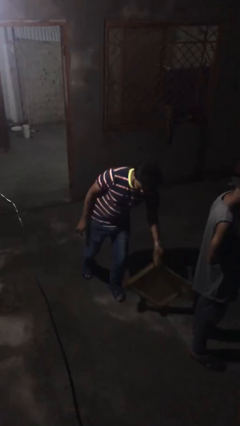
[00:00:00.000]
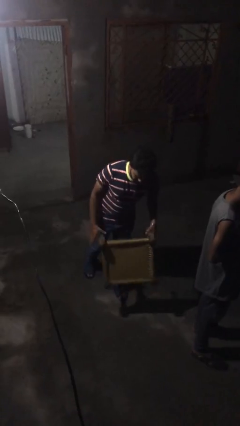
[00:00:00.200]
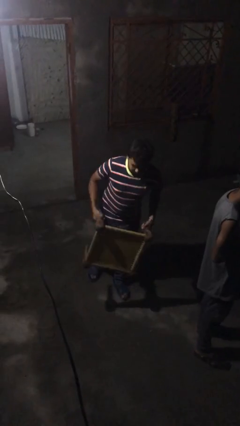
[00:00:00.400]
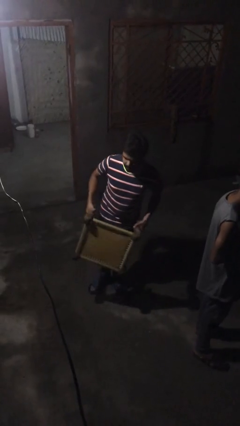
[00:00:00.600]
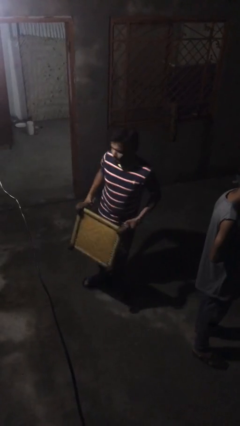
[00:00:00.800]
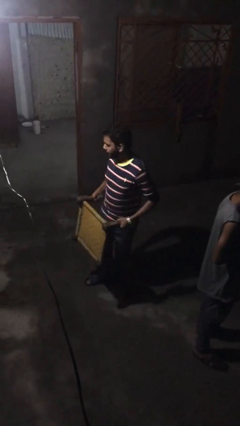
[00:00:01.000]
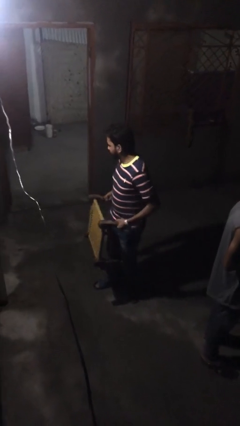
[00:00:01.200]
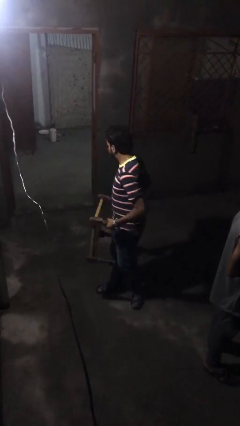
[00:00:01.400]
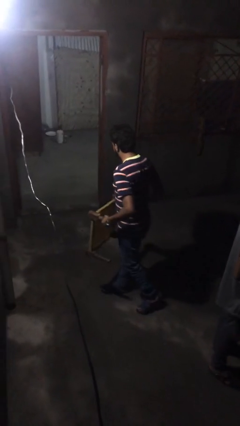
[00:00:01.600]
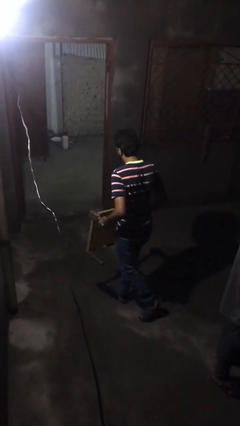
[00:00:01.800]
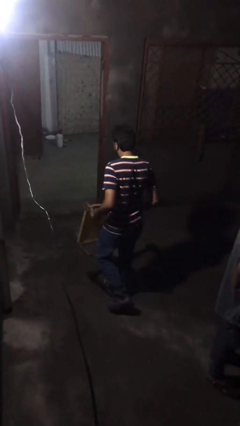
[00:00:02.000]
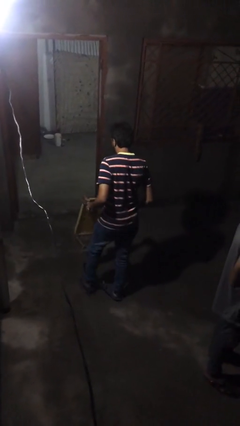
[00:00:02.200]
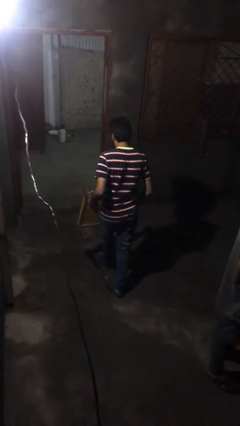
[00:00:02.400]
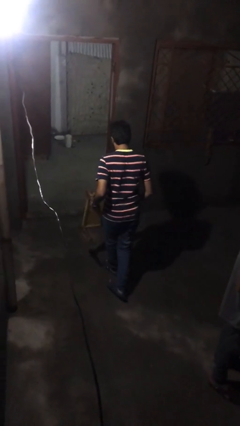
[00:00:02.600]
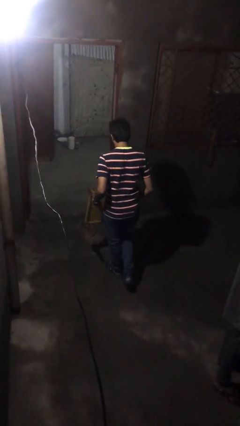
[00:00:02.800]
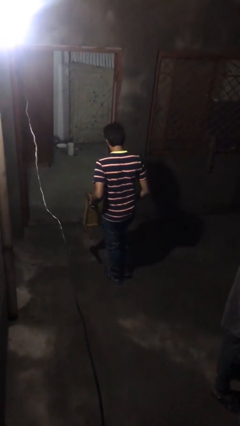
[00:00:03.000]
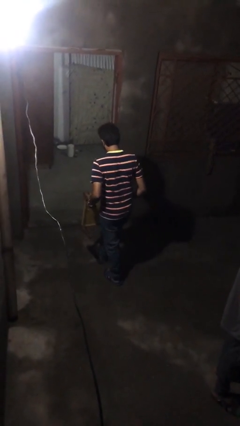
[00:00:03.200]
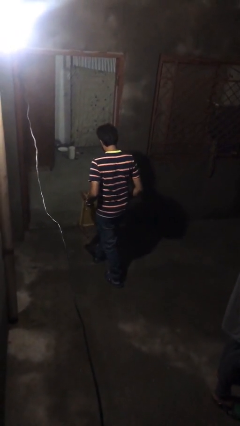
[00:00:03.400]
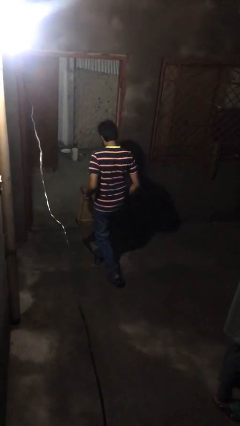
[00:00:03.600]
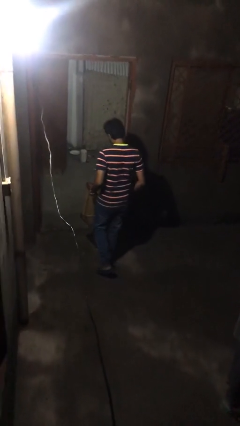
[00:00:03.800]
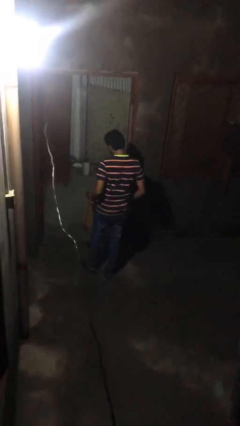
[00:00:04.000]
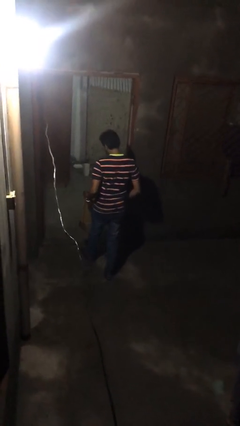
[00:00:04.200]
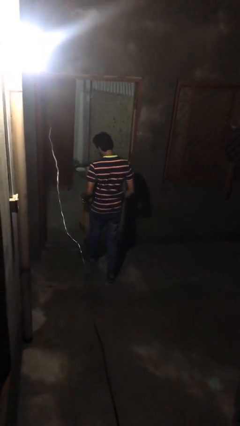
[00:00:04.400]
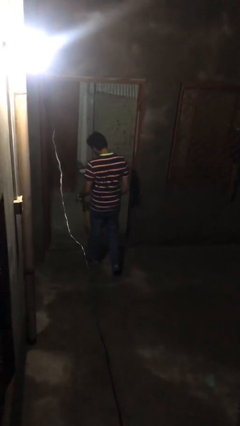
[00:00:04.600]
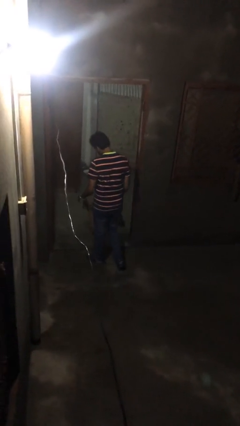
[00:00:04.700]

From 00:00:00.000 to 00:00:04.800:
person steals object from person

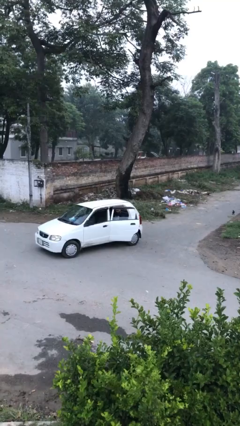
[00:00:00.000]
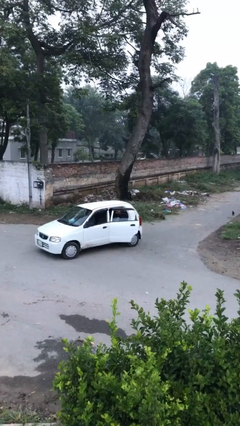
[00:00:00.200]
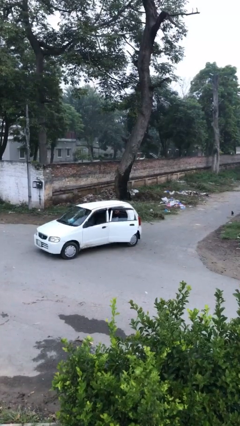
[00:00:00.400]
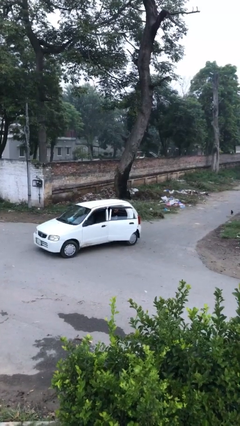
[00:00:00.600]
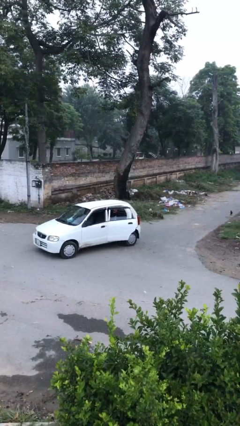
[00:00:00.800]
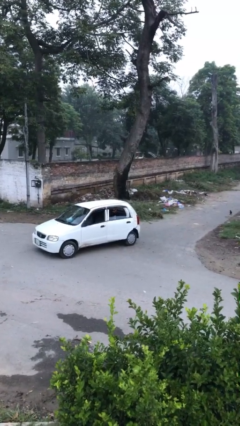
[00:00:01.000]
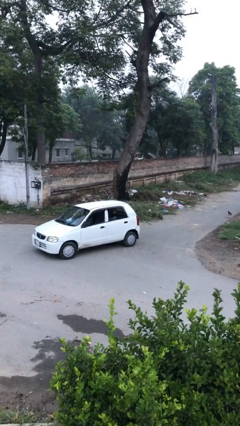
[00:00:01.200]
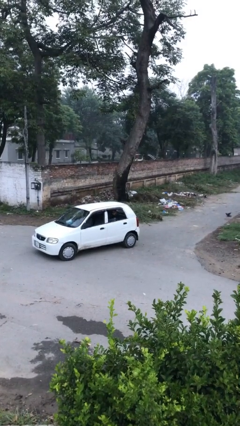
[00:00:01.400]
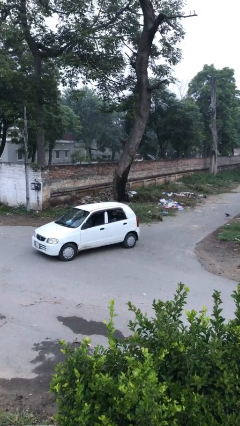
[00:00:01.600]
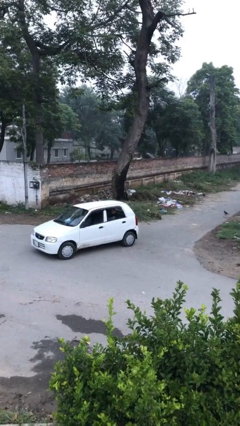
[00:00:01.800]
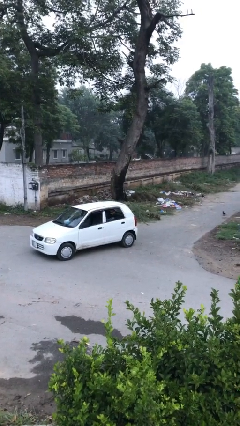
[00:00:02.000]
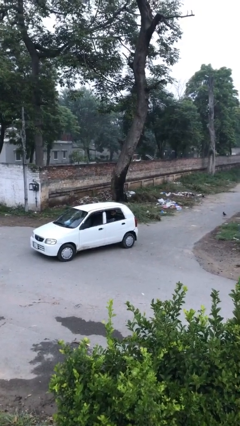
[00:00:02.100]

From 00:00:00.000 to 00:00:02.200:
person closes car door

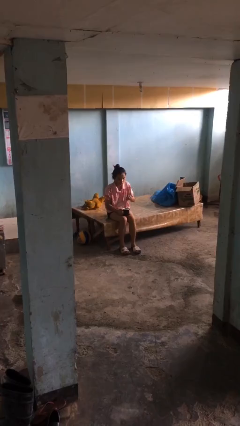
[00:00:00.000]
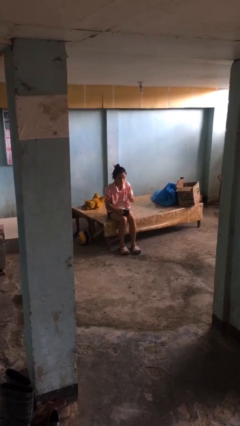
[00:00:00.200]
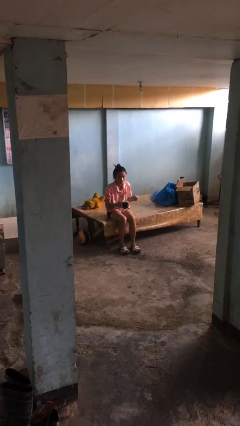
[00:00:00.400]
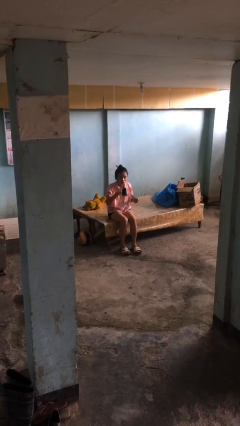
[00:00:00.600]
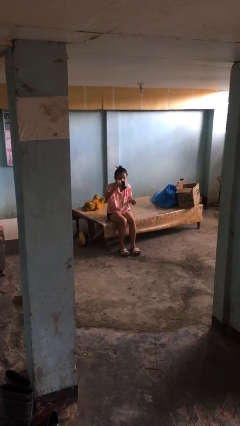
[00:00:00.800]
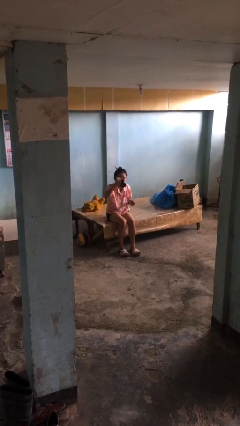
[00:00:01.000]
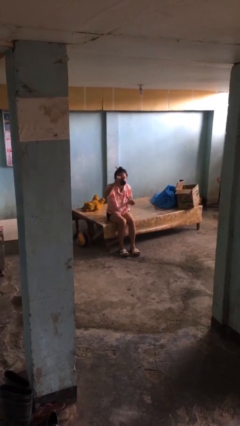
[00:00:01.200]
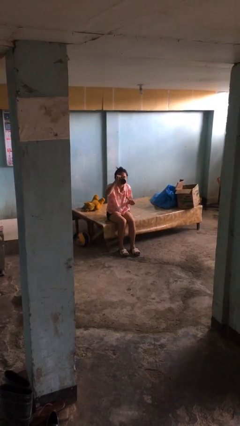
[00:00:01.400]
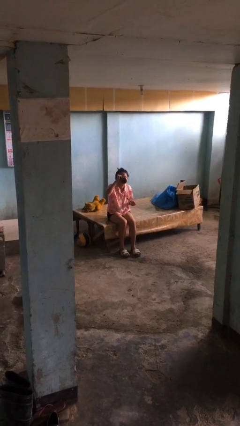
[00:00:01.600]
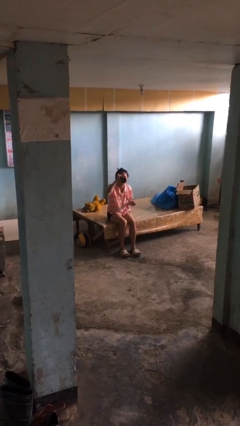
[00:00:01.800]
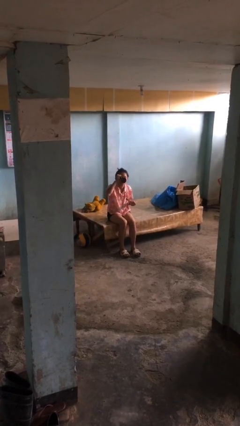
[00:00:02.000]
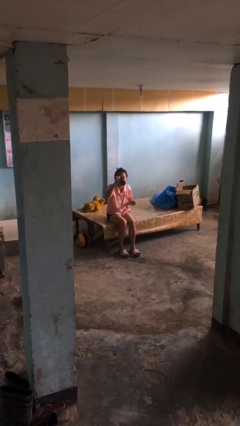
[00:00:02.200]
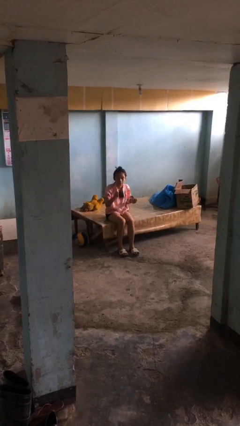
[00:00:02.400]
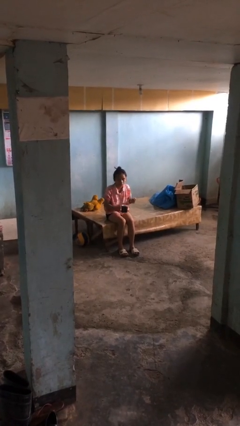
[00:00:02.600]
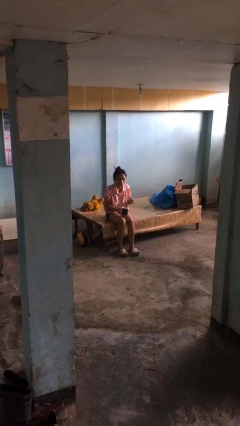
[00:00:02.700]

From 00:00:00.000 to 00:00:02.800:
person drinks from mug

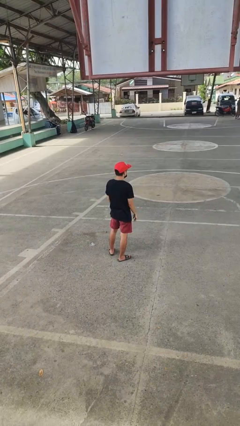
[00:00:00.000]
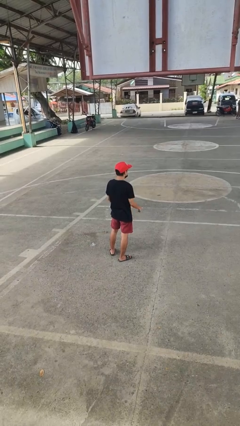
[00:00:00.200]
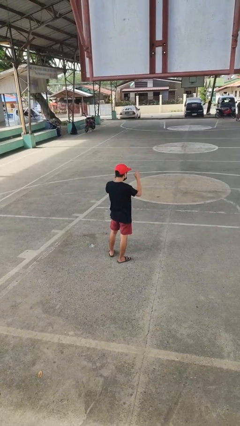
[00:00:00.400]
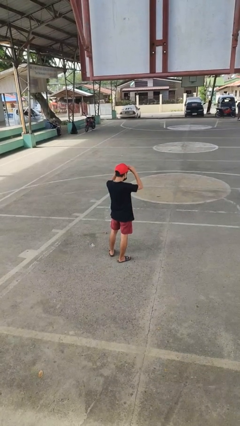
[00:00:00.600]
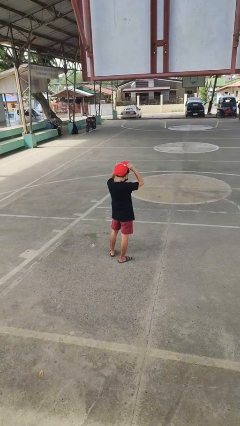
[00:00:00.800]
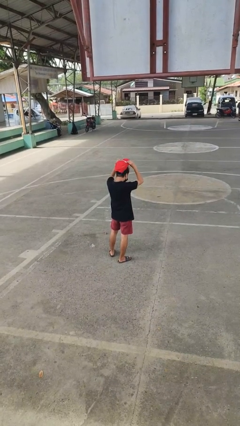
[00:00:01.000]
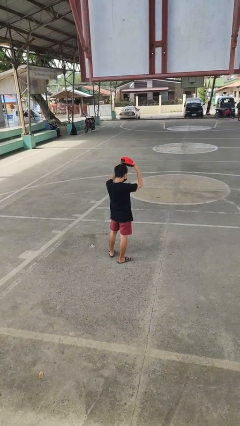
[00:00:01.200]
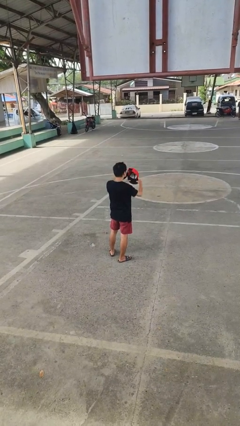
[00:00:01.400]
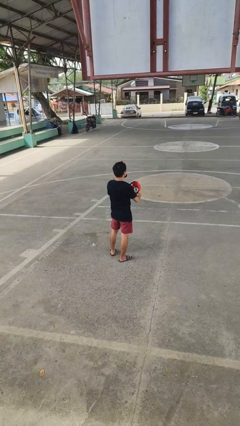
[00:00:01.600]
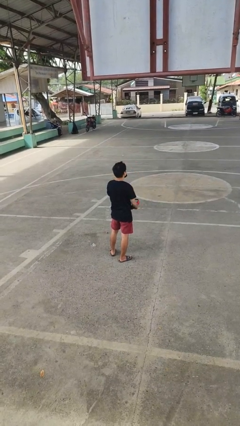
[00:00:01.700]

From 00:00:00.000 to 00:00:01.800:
person takes off hat

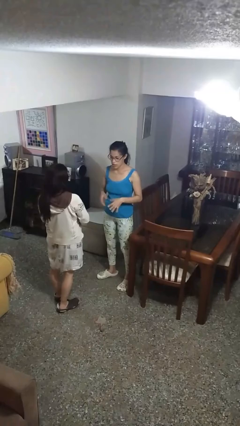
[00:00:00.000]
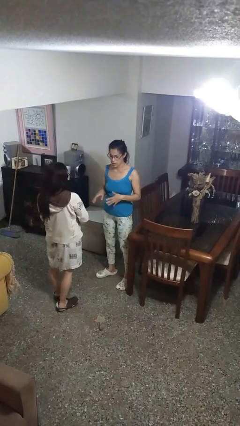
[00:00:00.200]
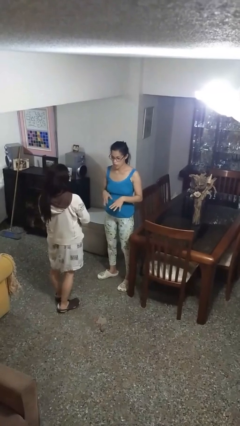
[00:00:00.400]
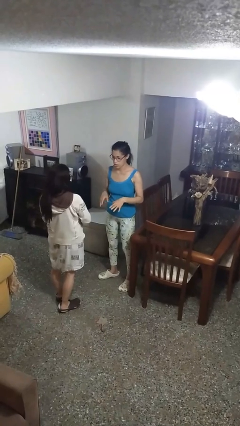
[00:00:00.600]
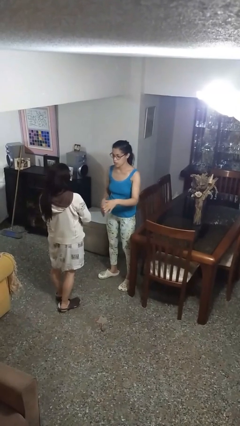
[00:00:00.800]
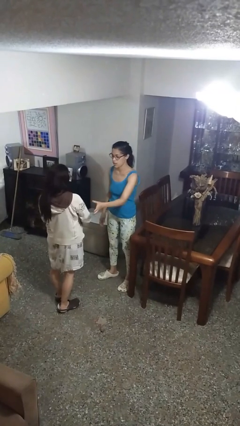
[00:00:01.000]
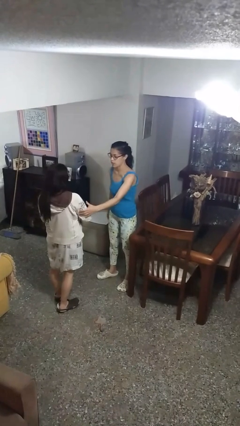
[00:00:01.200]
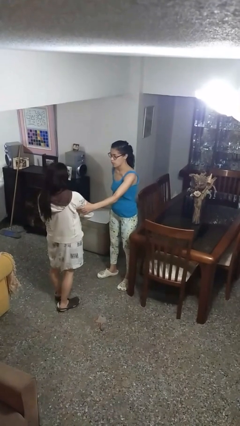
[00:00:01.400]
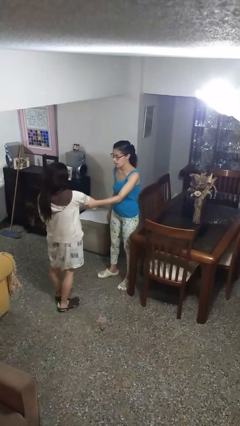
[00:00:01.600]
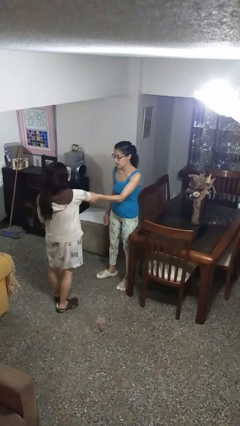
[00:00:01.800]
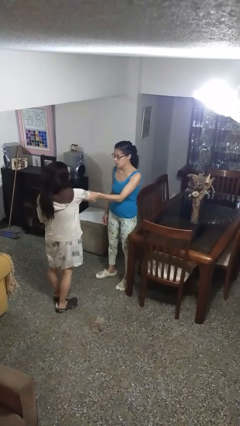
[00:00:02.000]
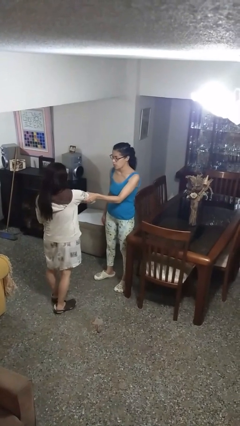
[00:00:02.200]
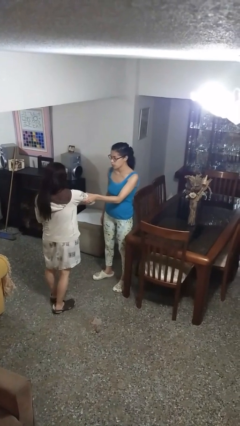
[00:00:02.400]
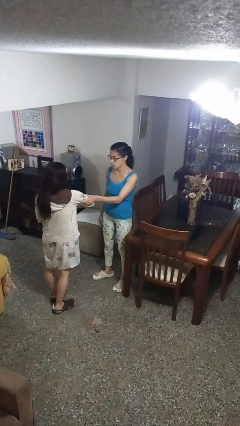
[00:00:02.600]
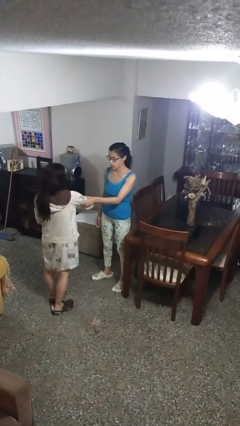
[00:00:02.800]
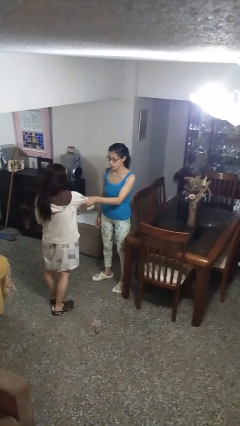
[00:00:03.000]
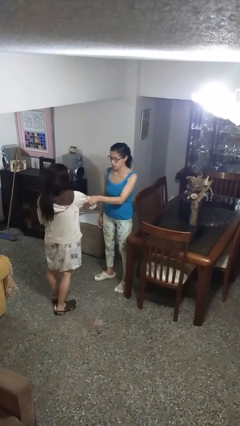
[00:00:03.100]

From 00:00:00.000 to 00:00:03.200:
person grabs person by bicep

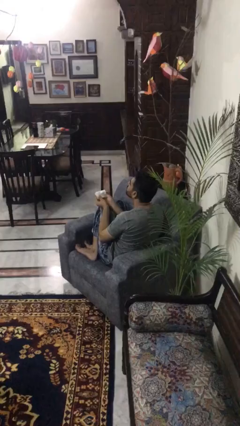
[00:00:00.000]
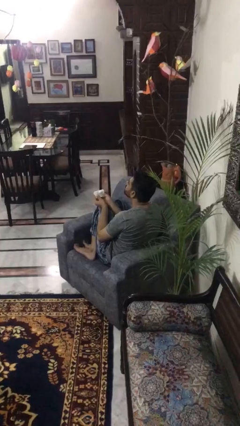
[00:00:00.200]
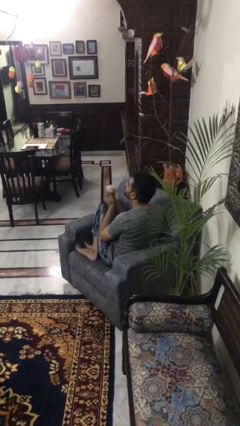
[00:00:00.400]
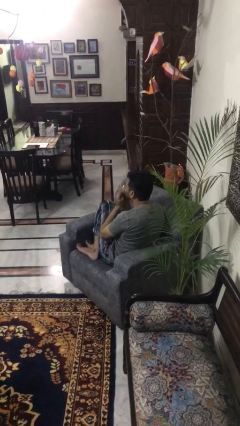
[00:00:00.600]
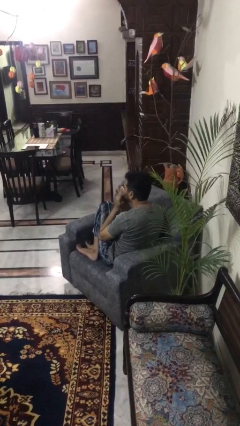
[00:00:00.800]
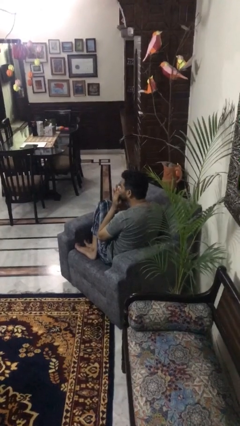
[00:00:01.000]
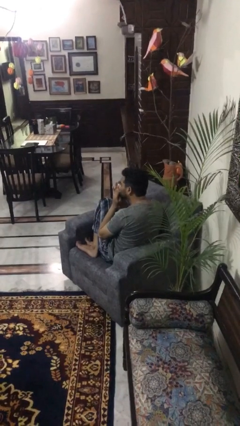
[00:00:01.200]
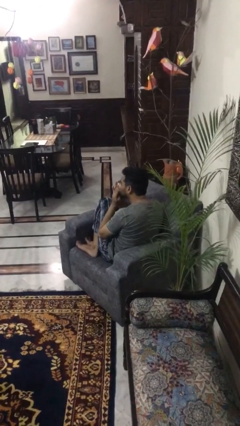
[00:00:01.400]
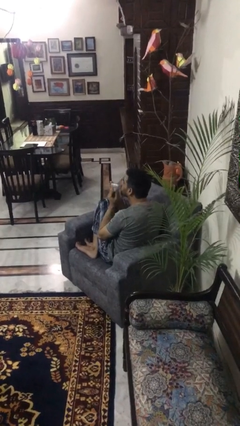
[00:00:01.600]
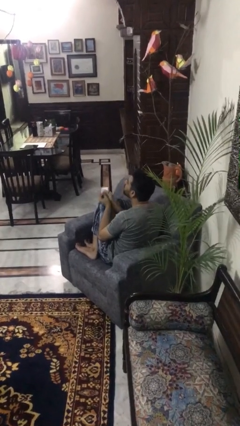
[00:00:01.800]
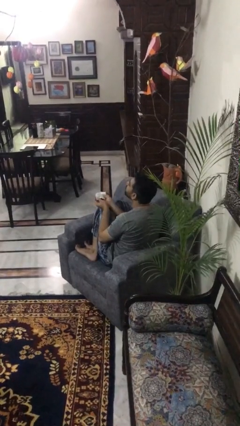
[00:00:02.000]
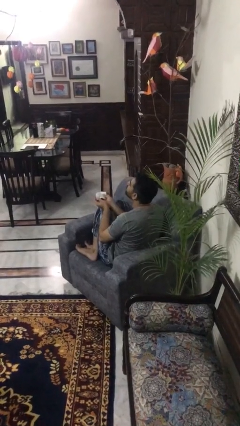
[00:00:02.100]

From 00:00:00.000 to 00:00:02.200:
person blows nose
